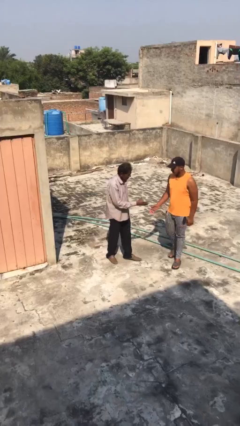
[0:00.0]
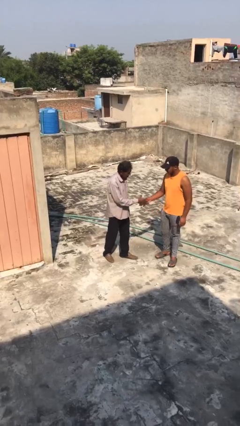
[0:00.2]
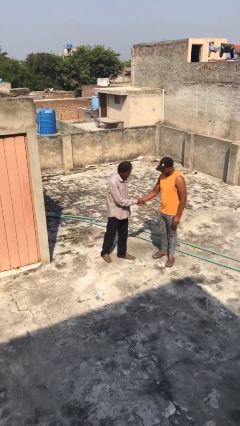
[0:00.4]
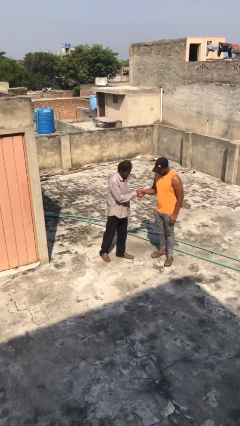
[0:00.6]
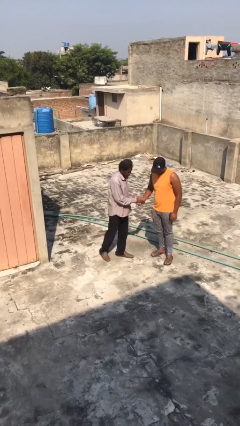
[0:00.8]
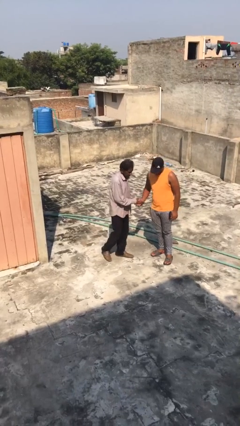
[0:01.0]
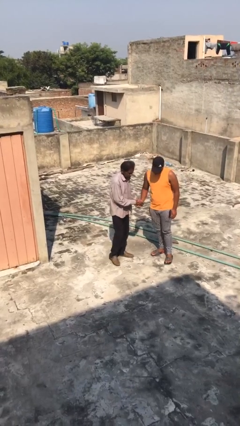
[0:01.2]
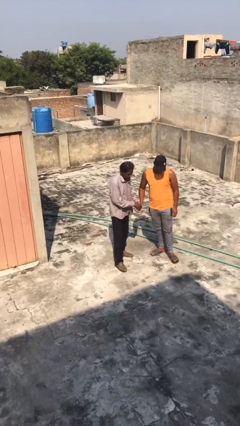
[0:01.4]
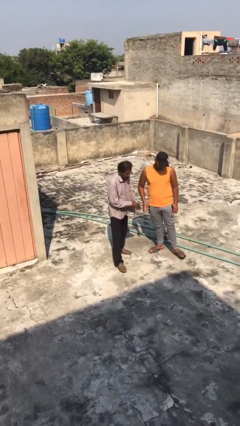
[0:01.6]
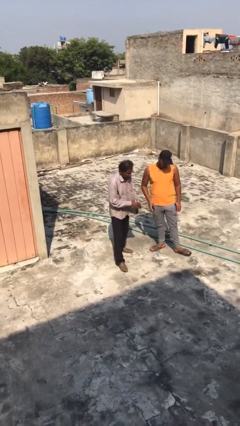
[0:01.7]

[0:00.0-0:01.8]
person shakes hand

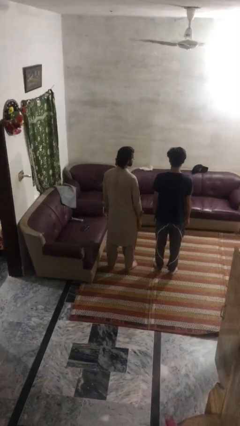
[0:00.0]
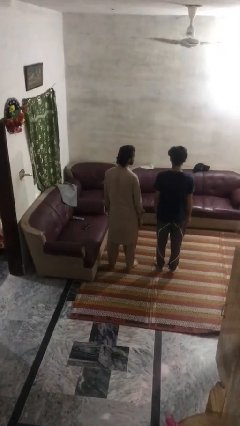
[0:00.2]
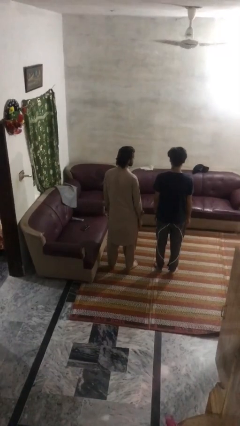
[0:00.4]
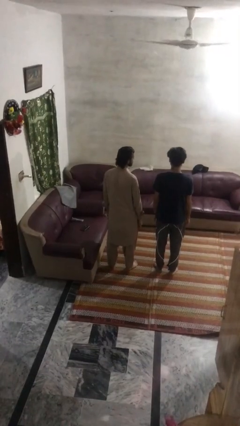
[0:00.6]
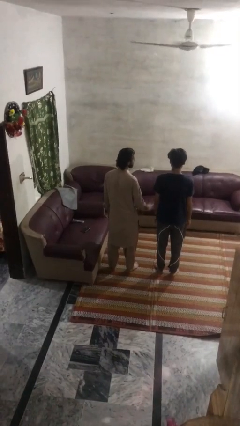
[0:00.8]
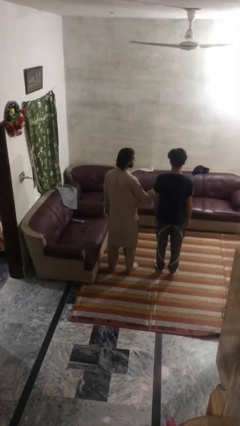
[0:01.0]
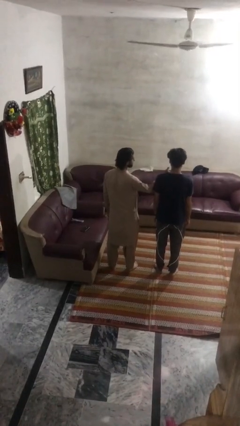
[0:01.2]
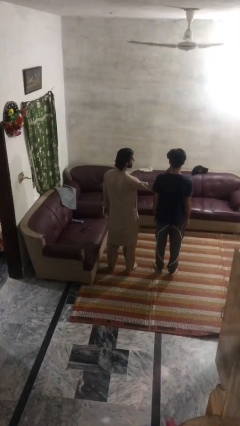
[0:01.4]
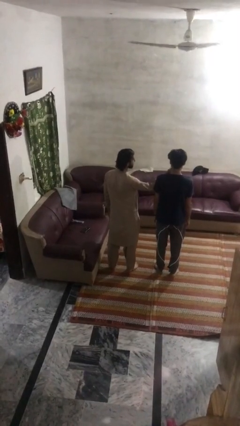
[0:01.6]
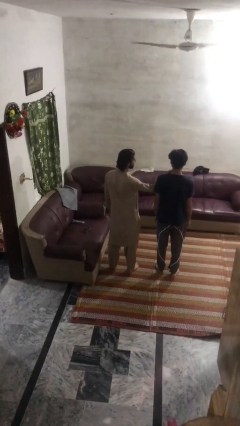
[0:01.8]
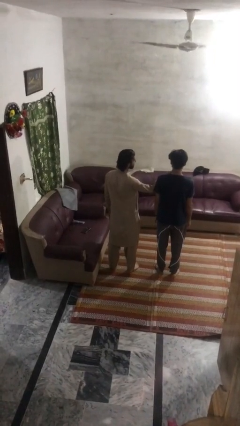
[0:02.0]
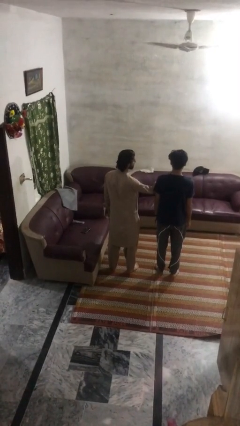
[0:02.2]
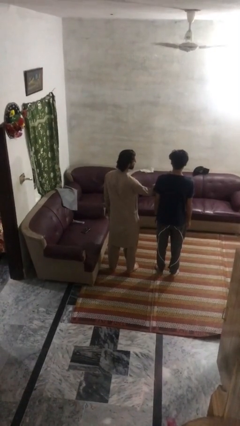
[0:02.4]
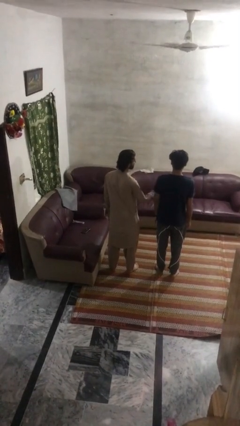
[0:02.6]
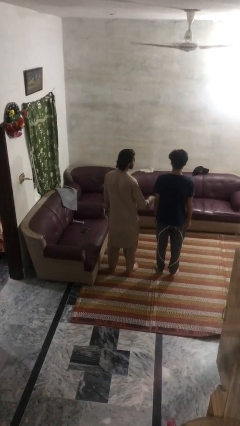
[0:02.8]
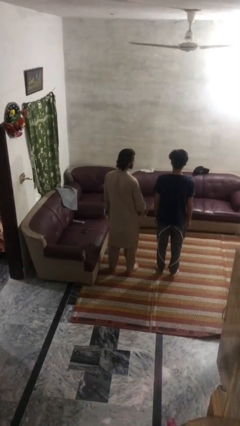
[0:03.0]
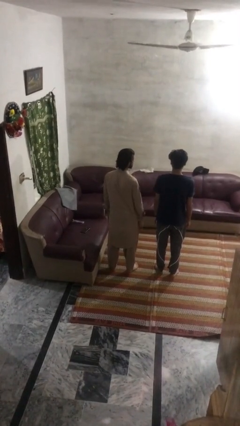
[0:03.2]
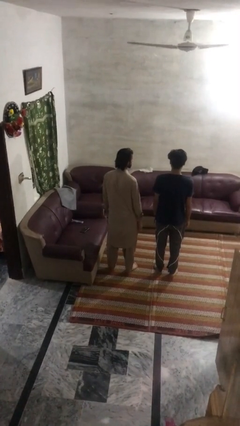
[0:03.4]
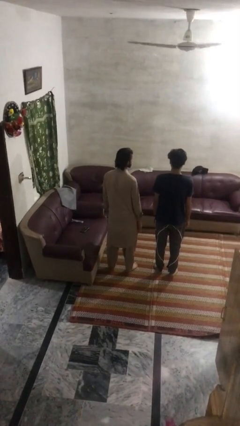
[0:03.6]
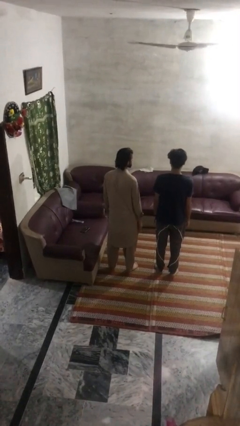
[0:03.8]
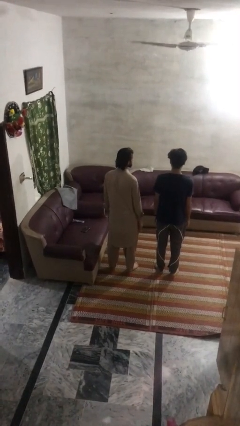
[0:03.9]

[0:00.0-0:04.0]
person touches face of person

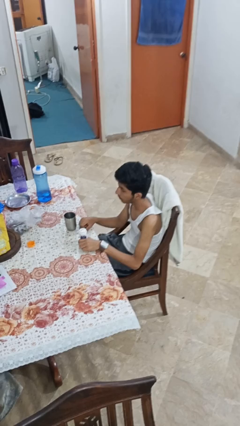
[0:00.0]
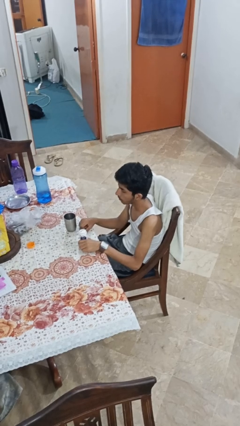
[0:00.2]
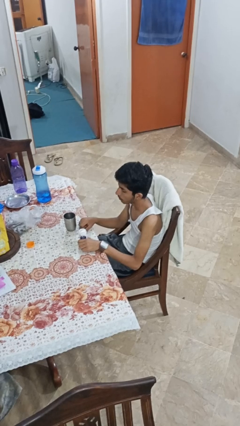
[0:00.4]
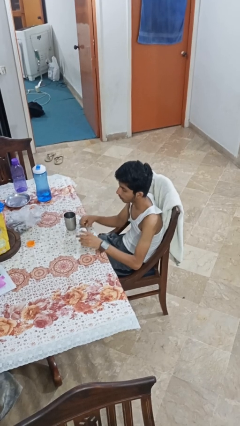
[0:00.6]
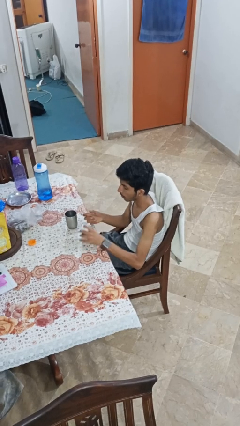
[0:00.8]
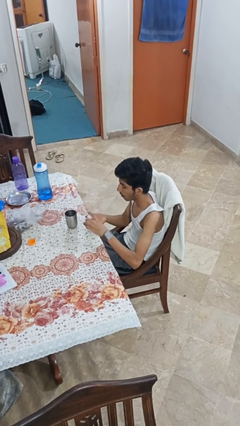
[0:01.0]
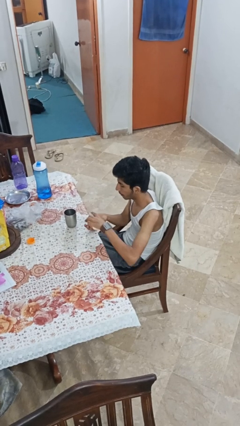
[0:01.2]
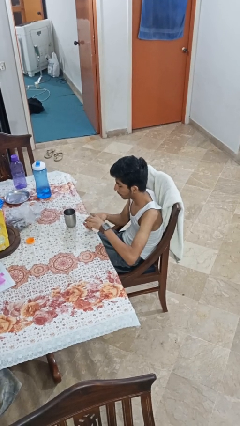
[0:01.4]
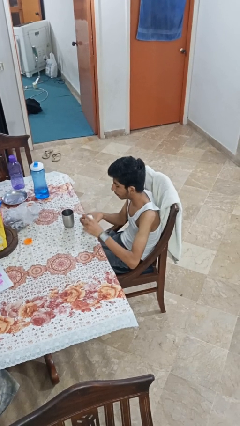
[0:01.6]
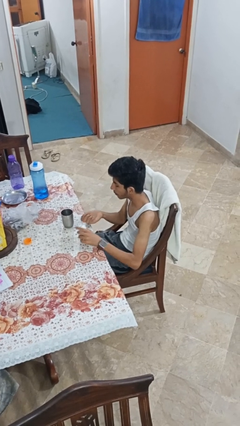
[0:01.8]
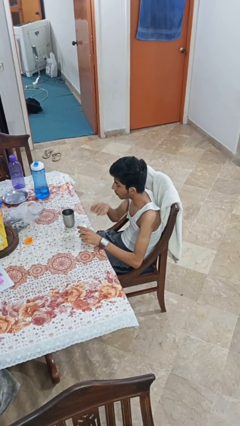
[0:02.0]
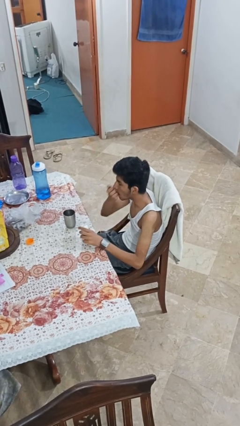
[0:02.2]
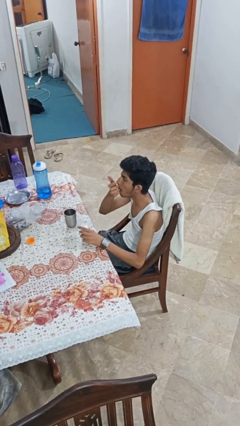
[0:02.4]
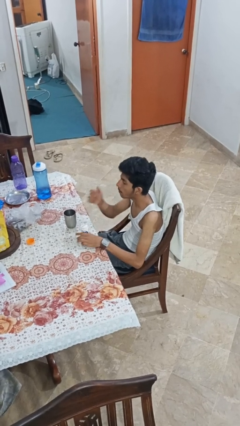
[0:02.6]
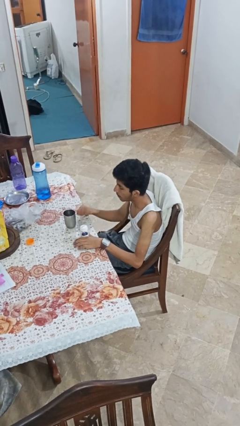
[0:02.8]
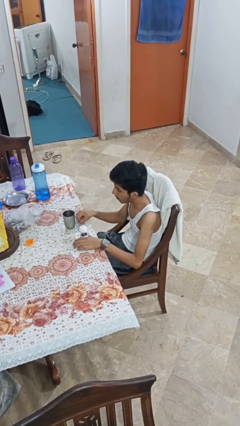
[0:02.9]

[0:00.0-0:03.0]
person takes medicine pills

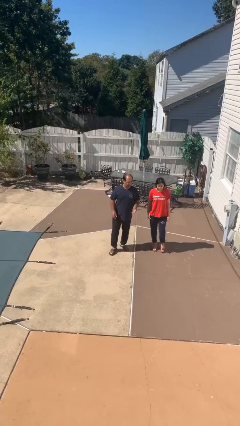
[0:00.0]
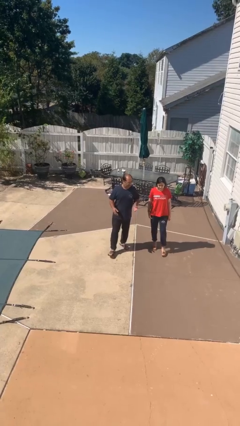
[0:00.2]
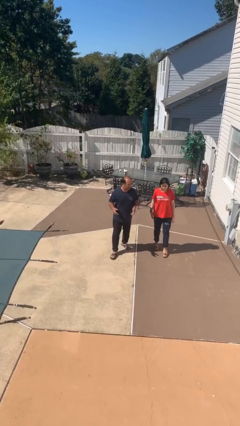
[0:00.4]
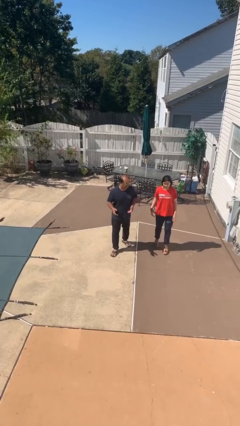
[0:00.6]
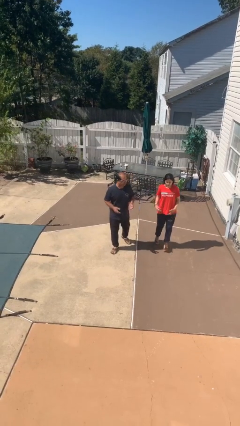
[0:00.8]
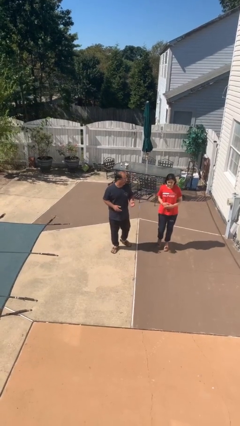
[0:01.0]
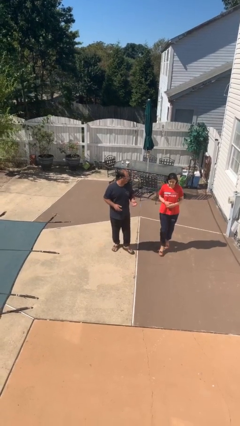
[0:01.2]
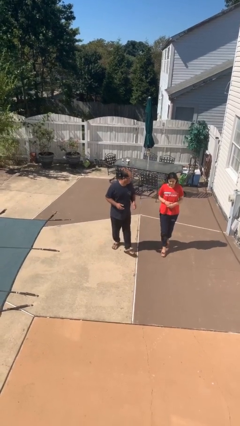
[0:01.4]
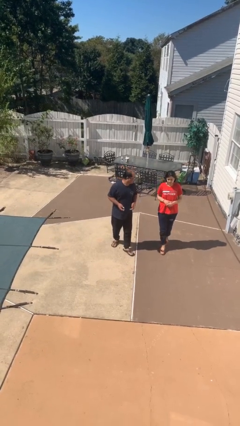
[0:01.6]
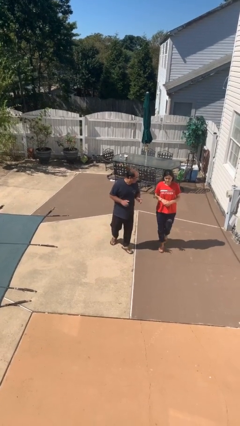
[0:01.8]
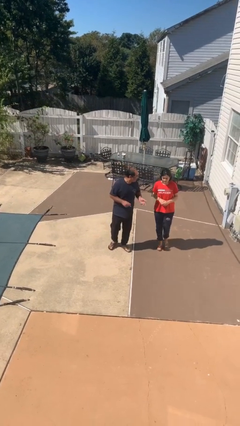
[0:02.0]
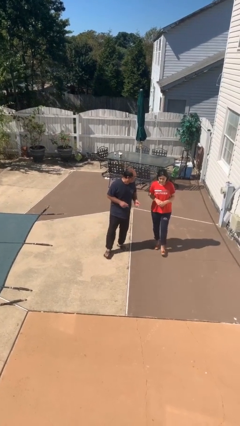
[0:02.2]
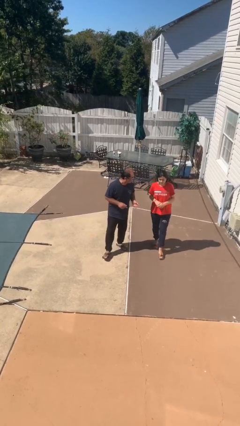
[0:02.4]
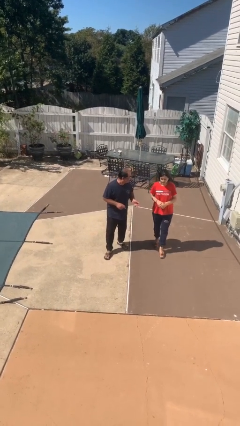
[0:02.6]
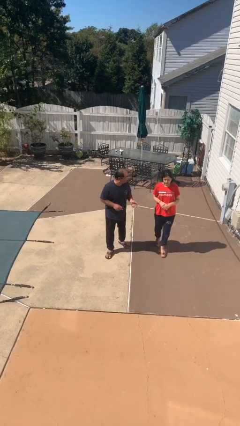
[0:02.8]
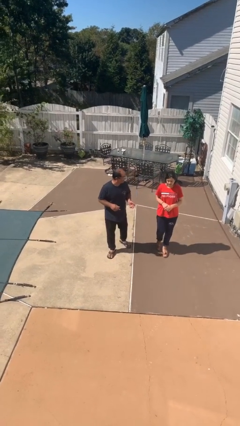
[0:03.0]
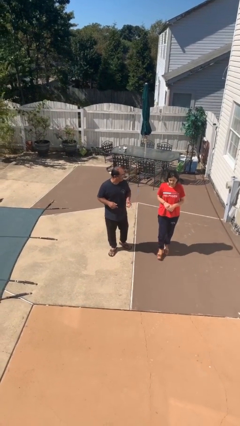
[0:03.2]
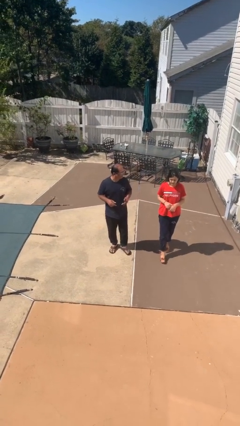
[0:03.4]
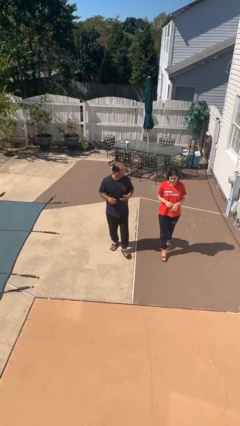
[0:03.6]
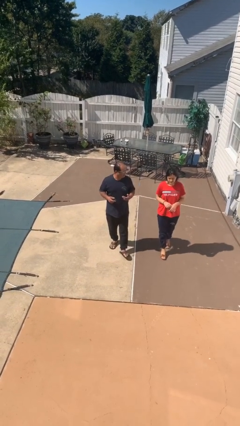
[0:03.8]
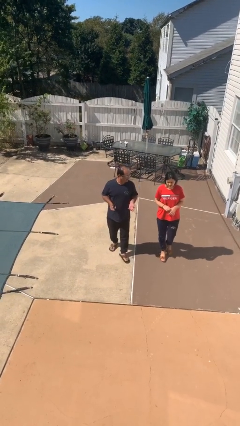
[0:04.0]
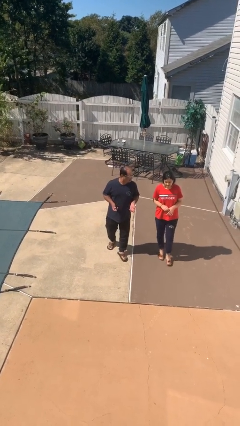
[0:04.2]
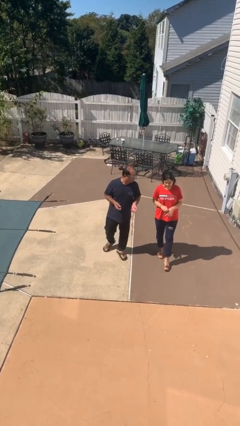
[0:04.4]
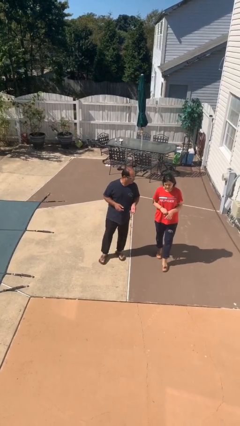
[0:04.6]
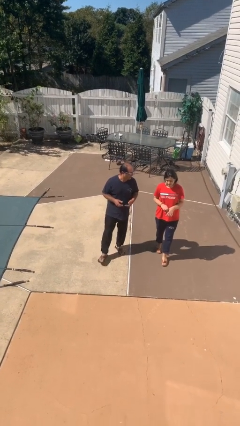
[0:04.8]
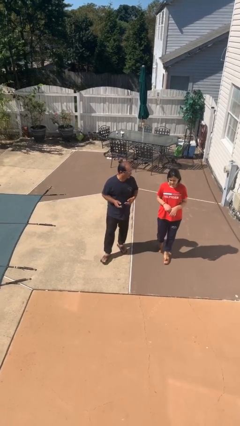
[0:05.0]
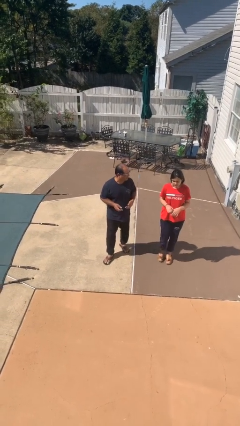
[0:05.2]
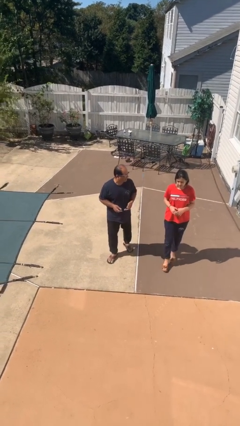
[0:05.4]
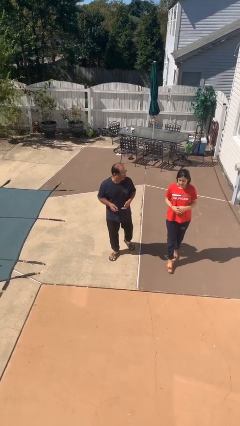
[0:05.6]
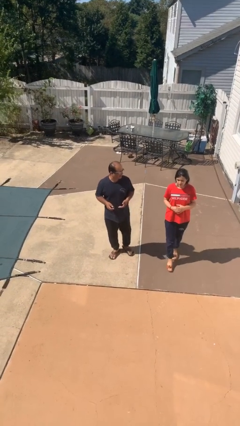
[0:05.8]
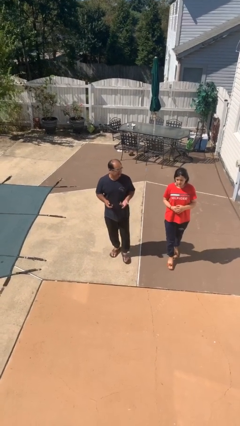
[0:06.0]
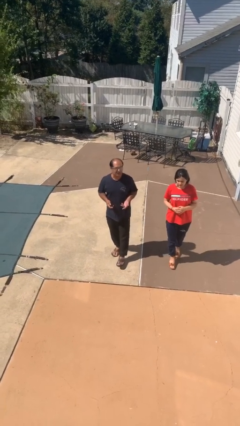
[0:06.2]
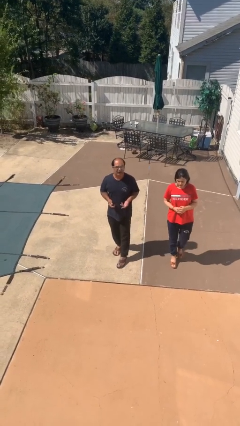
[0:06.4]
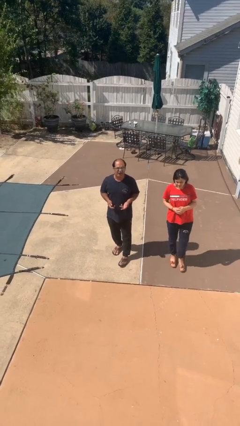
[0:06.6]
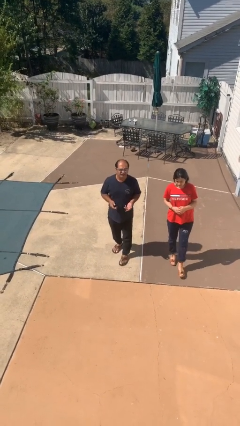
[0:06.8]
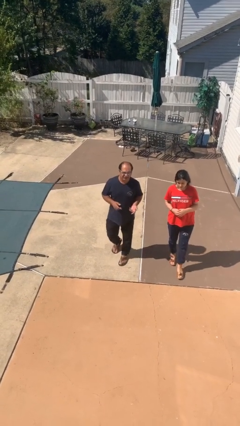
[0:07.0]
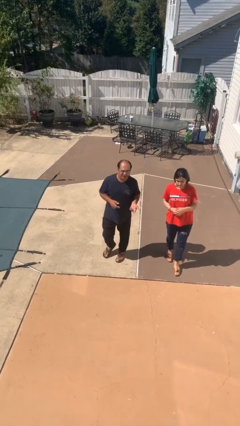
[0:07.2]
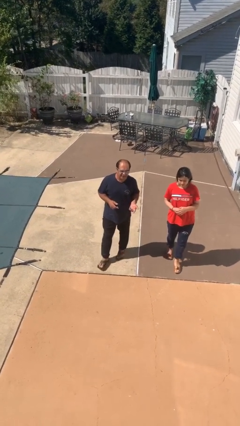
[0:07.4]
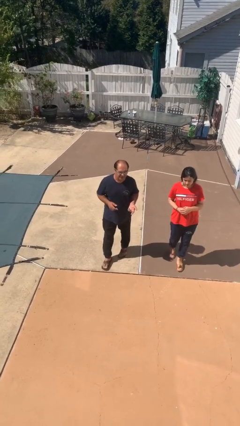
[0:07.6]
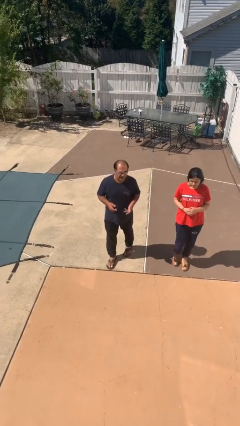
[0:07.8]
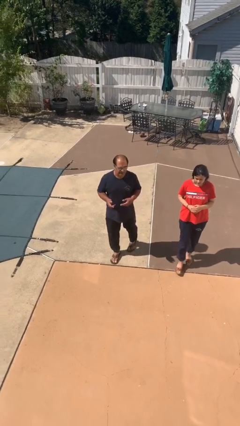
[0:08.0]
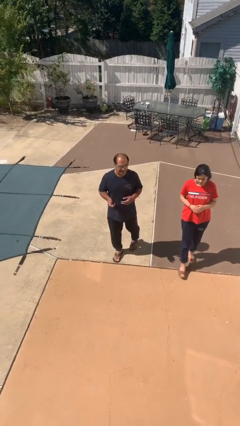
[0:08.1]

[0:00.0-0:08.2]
person talks to person

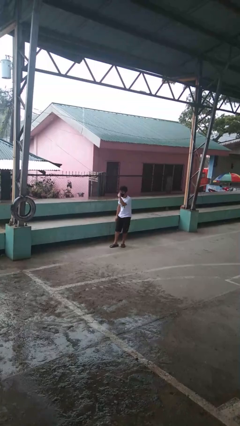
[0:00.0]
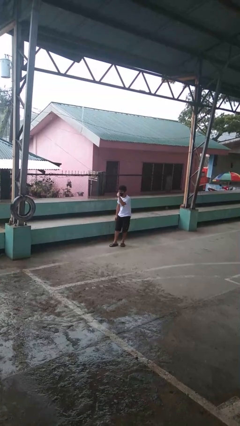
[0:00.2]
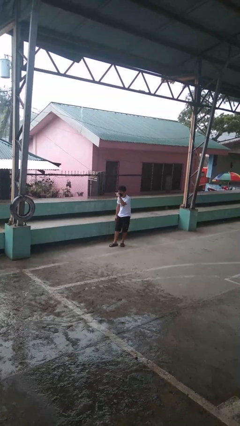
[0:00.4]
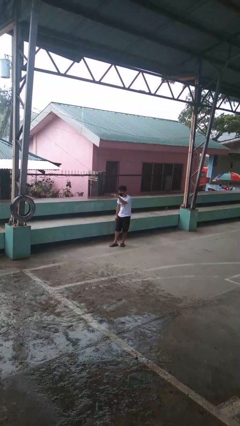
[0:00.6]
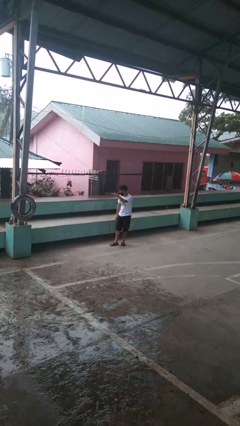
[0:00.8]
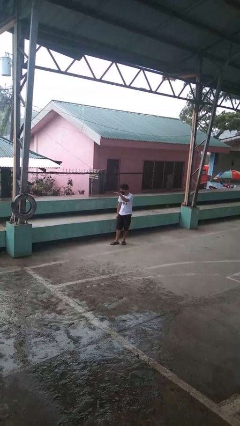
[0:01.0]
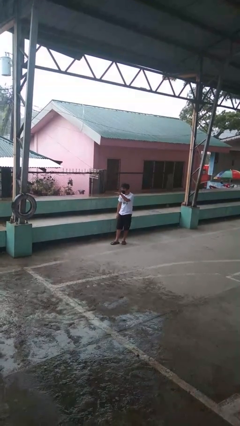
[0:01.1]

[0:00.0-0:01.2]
person gestures watch closely
